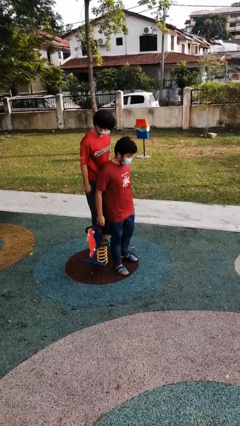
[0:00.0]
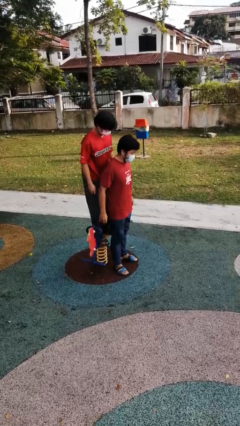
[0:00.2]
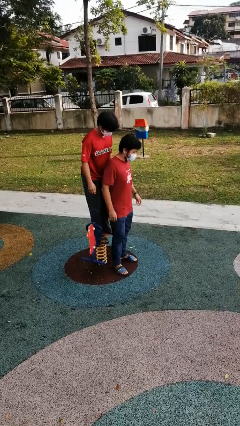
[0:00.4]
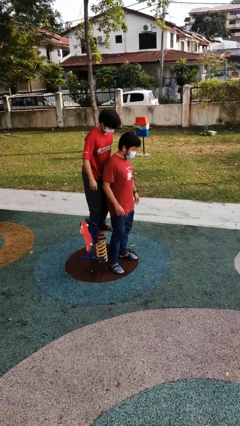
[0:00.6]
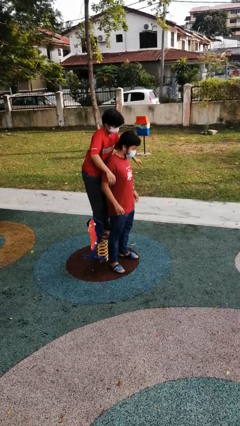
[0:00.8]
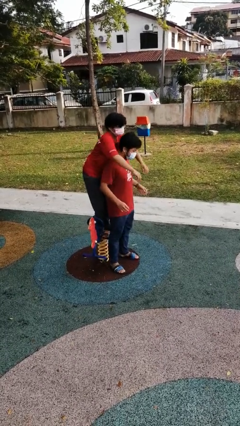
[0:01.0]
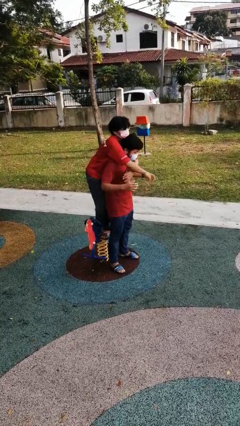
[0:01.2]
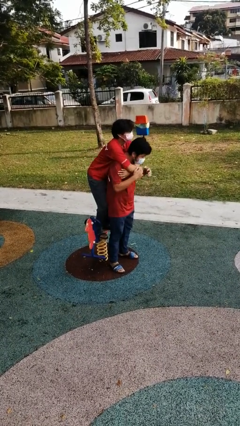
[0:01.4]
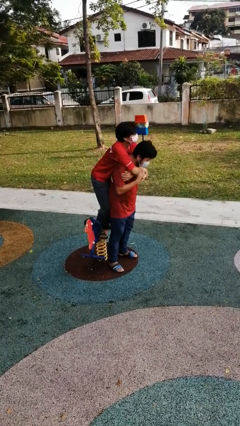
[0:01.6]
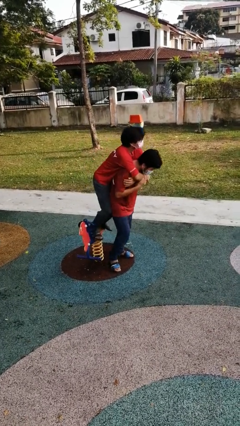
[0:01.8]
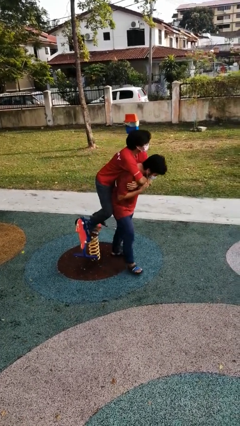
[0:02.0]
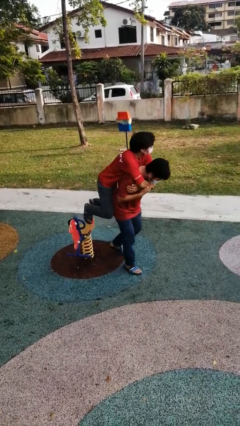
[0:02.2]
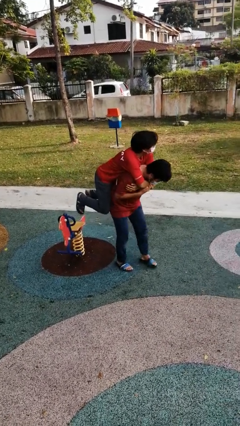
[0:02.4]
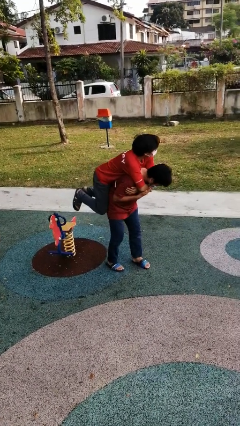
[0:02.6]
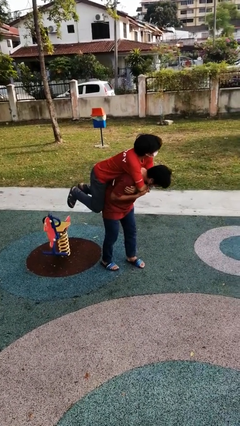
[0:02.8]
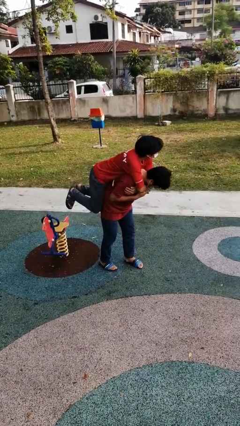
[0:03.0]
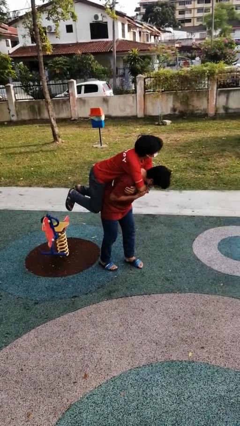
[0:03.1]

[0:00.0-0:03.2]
person carries person over shoulder

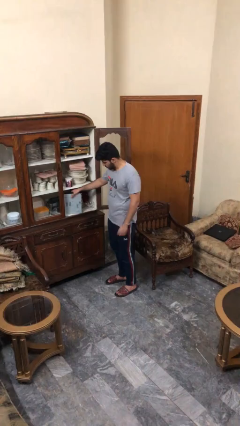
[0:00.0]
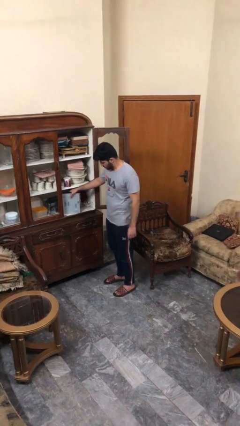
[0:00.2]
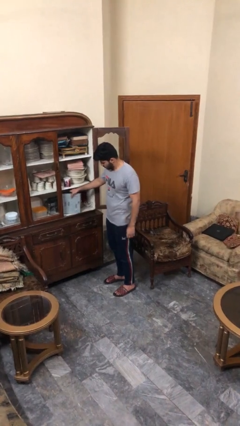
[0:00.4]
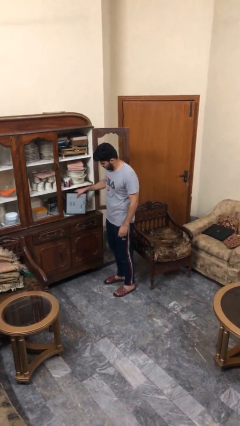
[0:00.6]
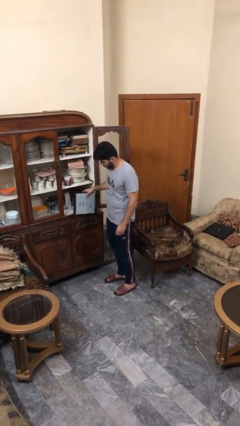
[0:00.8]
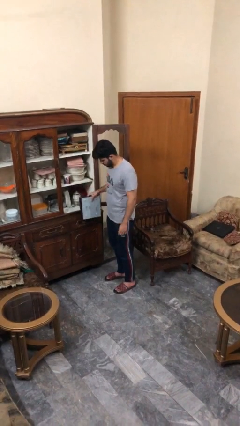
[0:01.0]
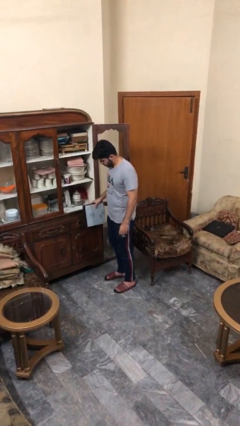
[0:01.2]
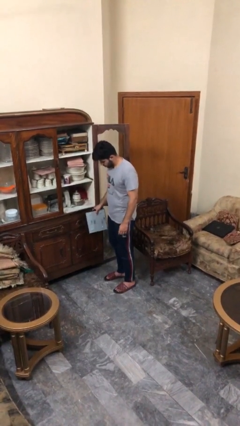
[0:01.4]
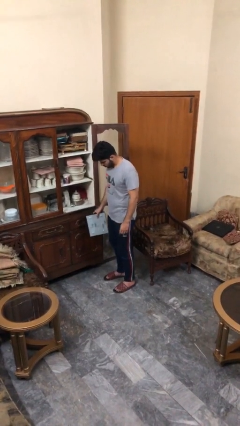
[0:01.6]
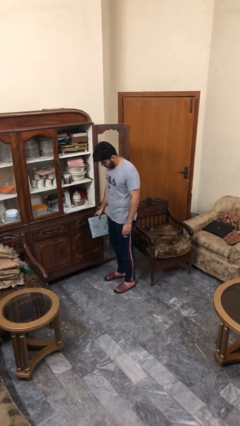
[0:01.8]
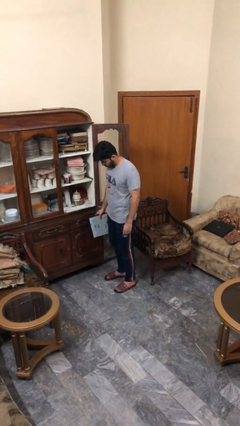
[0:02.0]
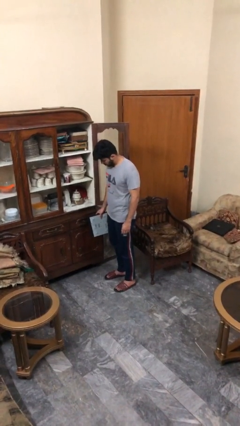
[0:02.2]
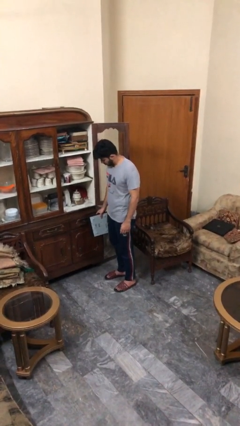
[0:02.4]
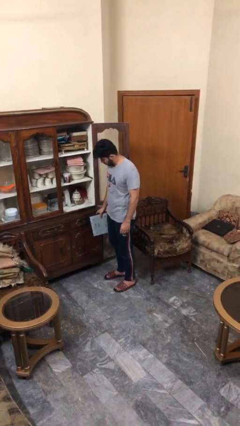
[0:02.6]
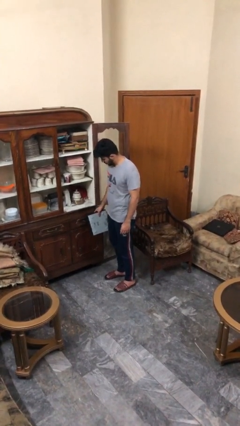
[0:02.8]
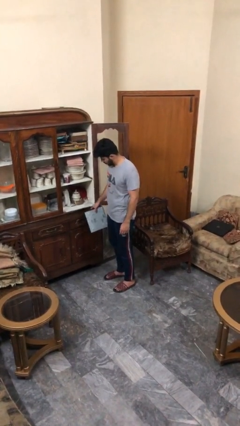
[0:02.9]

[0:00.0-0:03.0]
person picks up object from cabinet

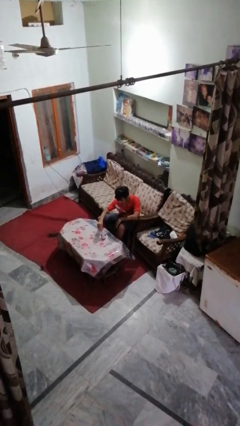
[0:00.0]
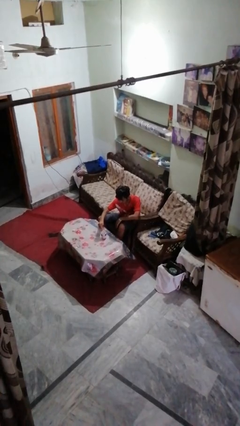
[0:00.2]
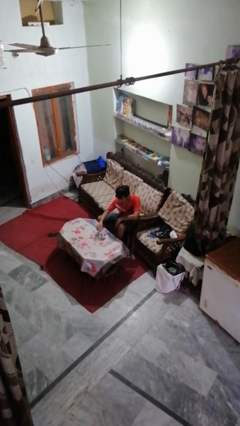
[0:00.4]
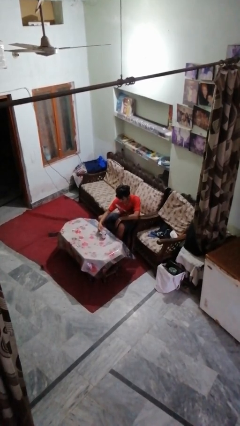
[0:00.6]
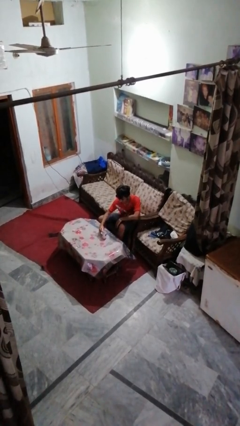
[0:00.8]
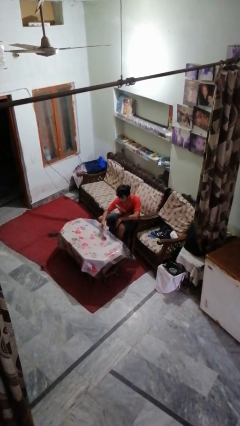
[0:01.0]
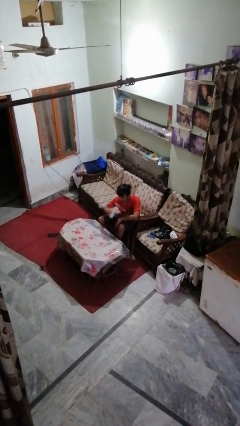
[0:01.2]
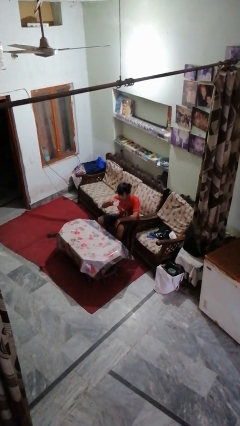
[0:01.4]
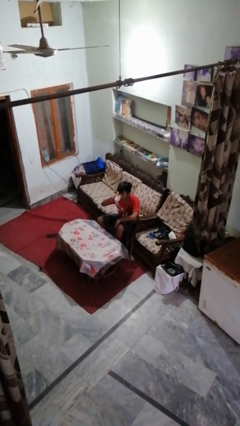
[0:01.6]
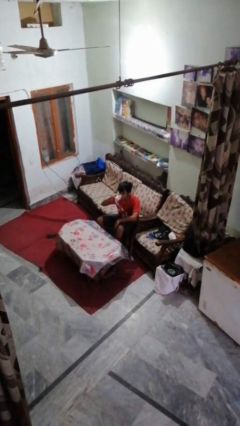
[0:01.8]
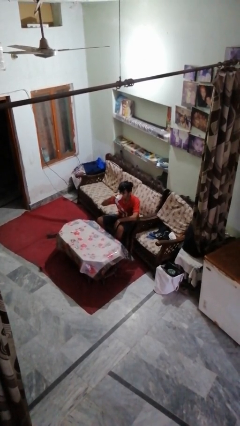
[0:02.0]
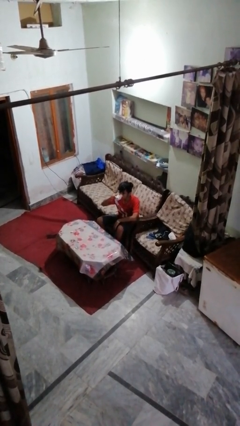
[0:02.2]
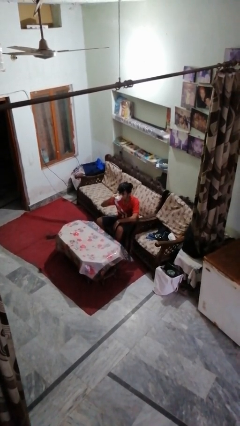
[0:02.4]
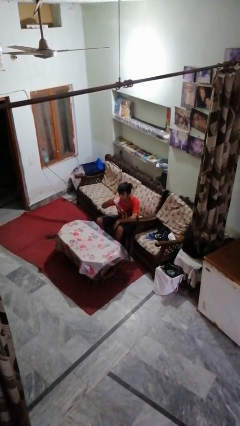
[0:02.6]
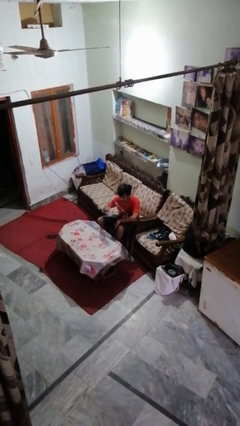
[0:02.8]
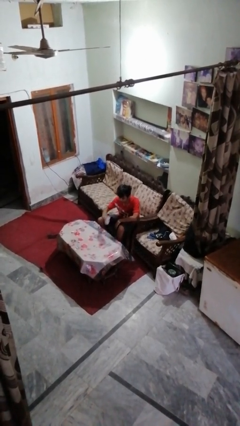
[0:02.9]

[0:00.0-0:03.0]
person drinks from mug

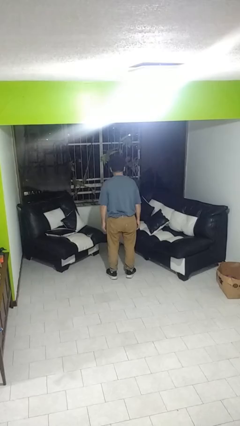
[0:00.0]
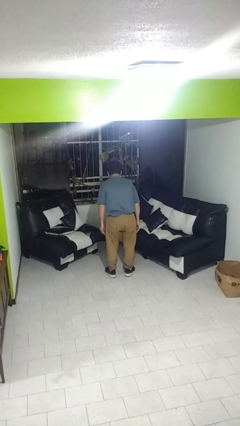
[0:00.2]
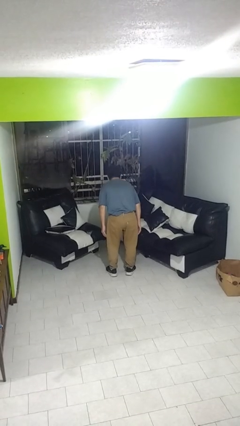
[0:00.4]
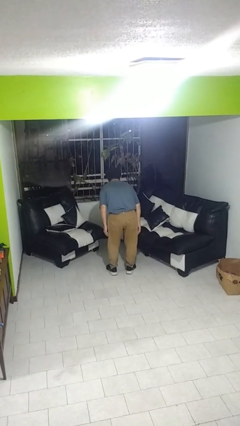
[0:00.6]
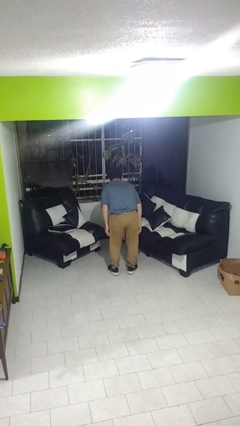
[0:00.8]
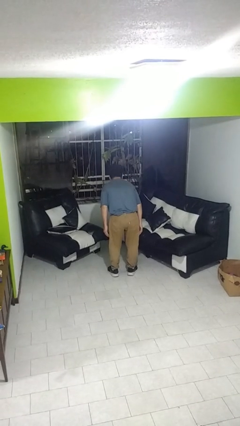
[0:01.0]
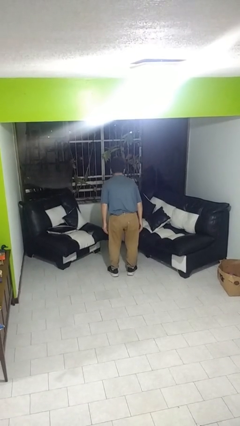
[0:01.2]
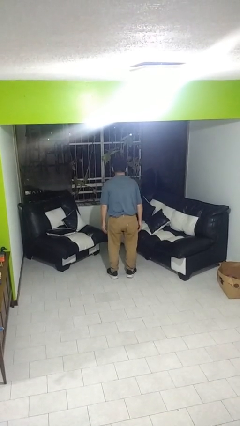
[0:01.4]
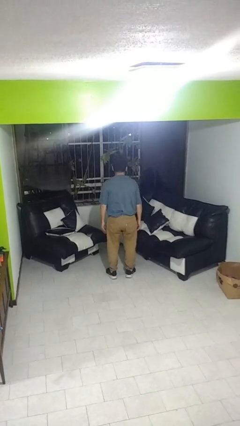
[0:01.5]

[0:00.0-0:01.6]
person bows

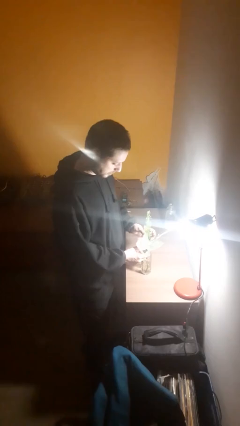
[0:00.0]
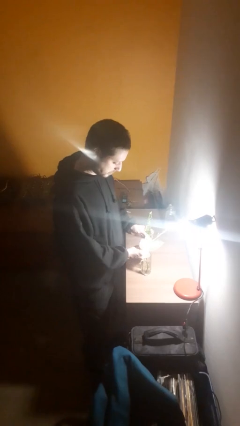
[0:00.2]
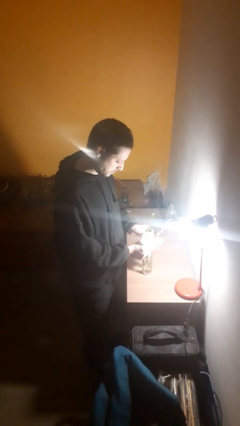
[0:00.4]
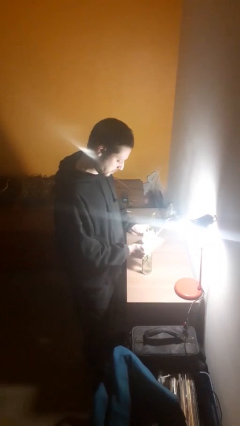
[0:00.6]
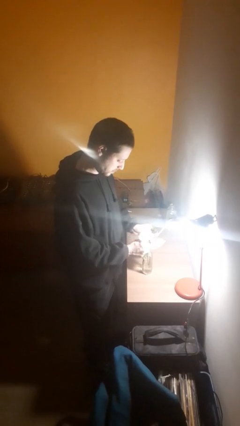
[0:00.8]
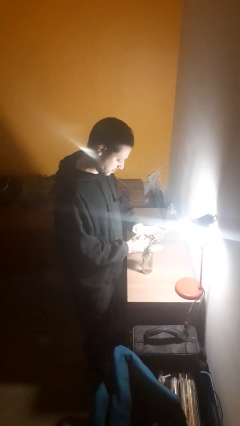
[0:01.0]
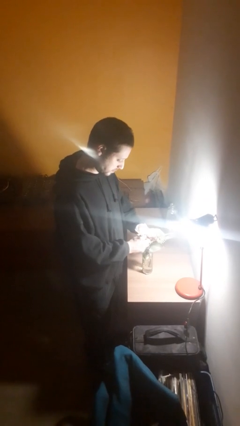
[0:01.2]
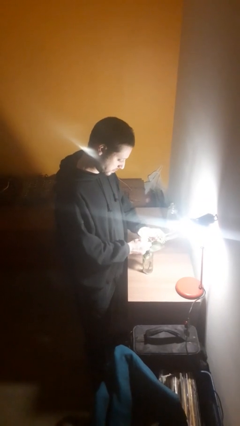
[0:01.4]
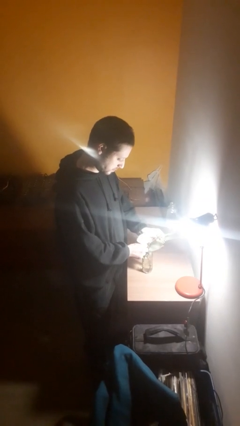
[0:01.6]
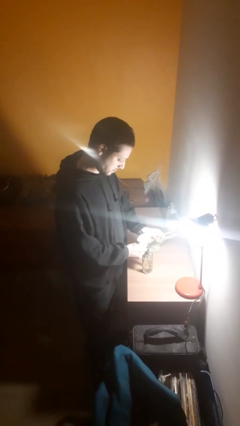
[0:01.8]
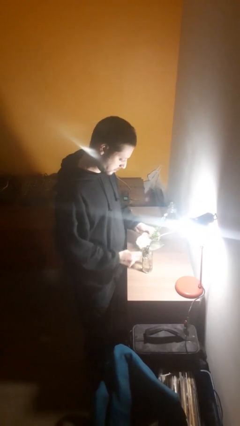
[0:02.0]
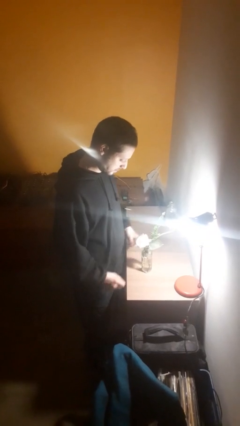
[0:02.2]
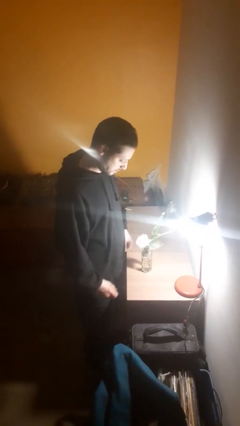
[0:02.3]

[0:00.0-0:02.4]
person arranges flowers in vase

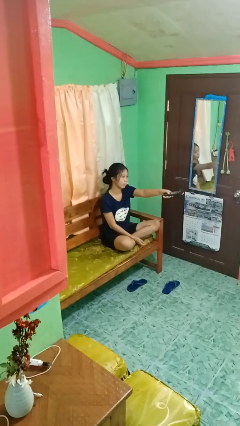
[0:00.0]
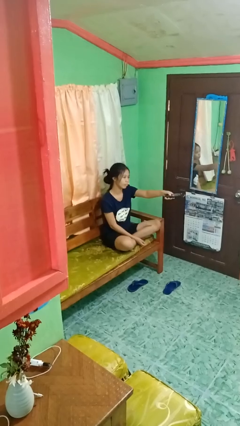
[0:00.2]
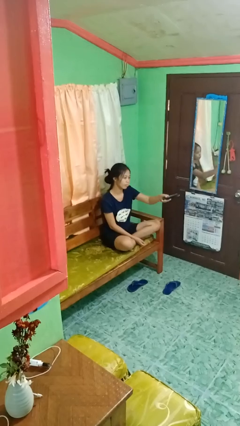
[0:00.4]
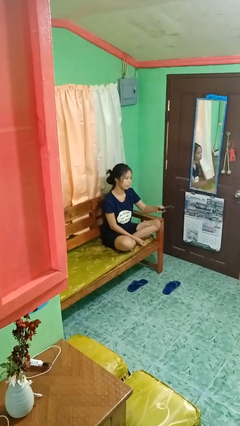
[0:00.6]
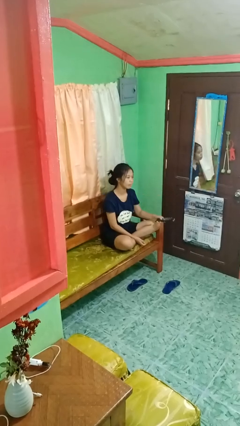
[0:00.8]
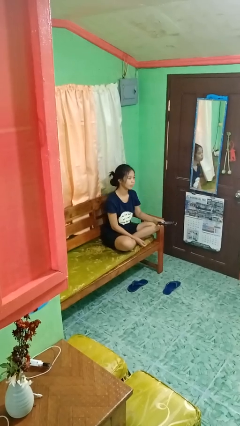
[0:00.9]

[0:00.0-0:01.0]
person uses television remote

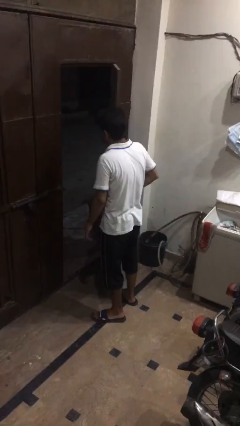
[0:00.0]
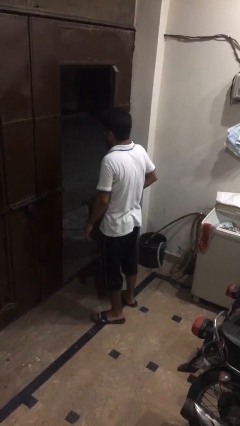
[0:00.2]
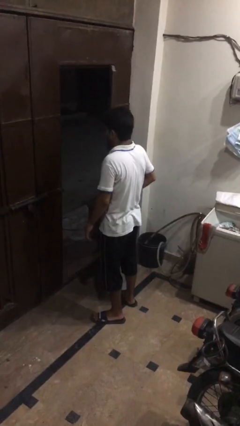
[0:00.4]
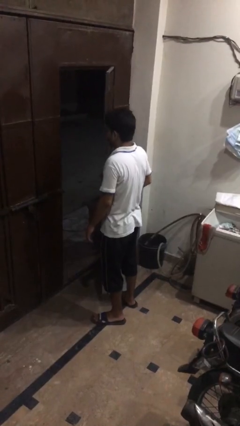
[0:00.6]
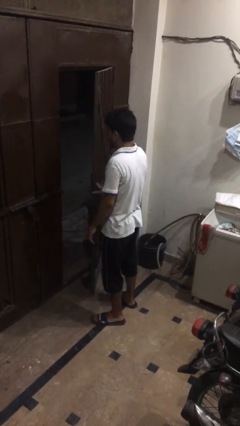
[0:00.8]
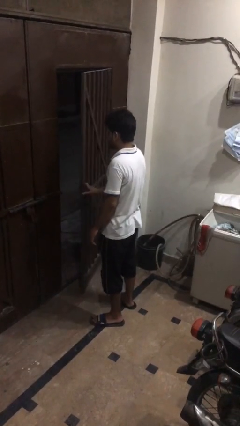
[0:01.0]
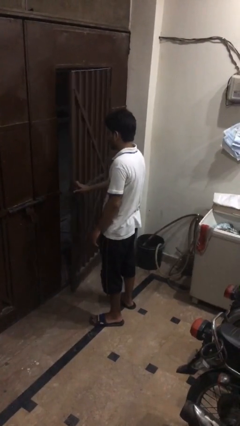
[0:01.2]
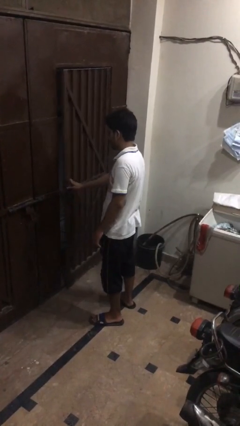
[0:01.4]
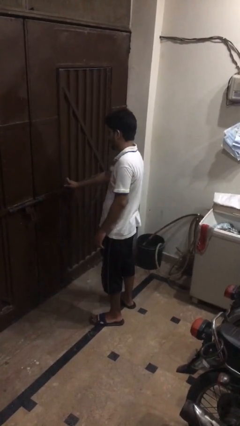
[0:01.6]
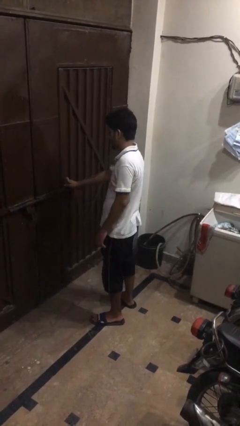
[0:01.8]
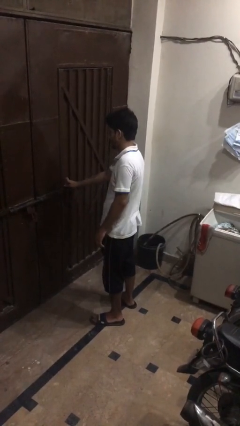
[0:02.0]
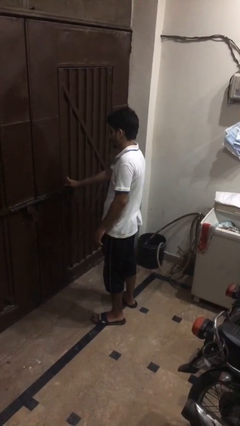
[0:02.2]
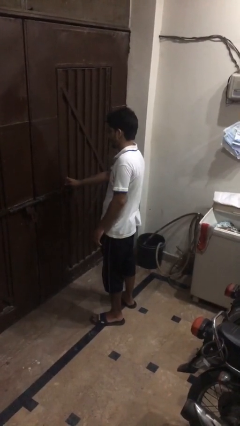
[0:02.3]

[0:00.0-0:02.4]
person closes gate

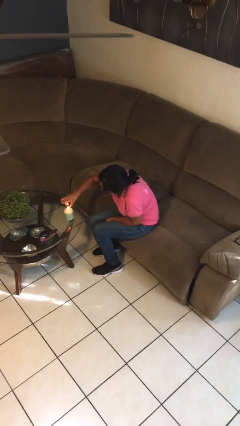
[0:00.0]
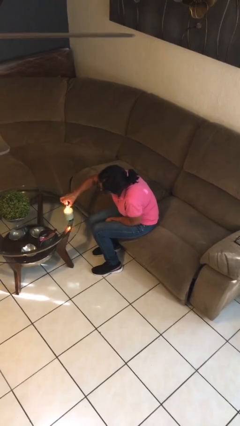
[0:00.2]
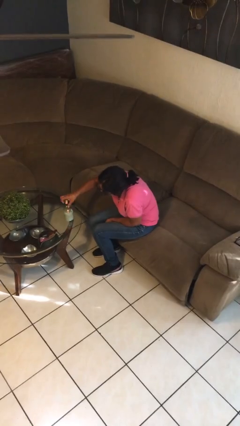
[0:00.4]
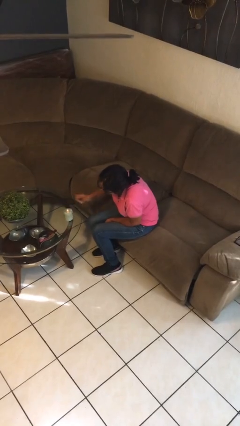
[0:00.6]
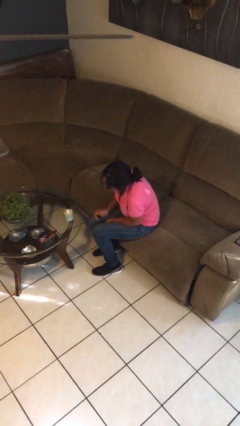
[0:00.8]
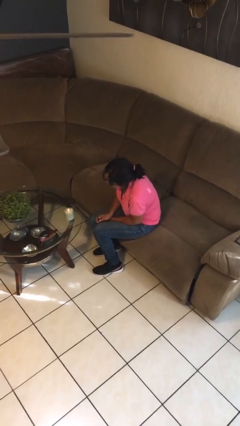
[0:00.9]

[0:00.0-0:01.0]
person lights candle
